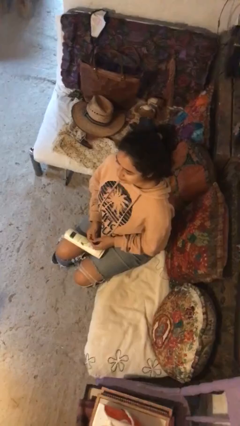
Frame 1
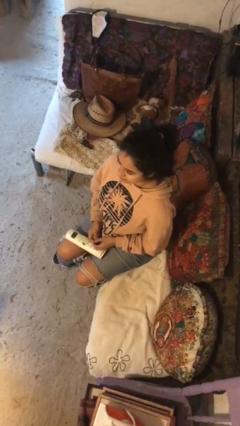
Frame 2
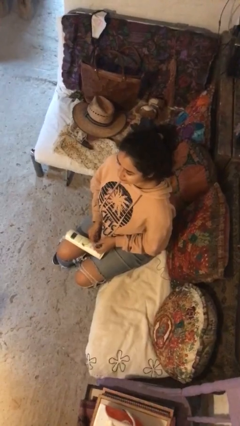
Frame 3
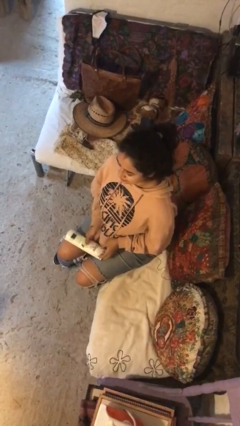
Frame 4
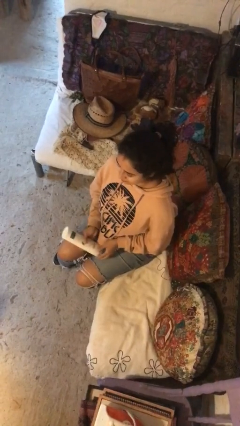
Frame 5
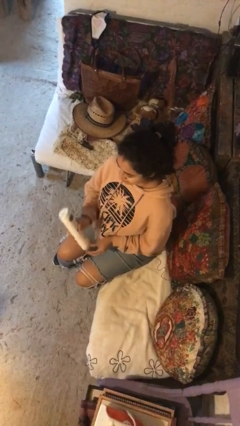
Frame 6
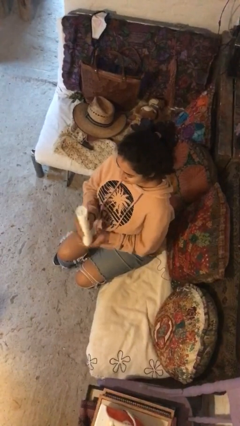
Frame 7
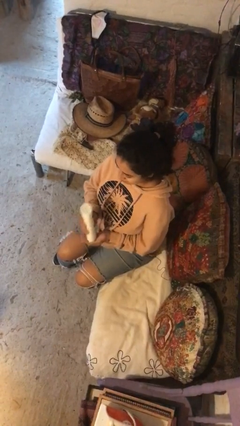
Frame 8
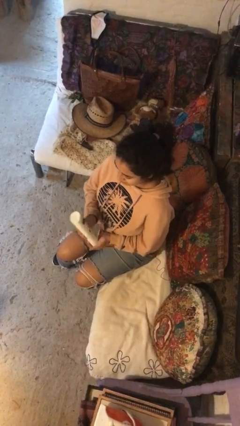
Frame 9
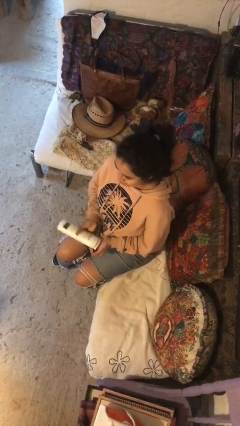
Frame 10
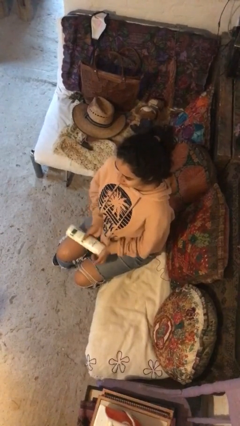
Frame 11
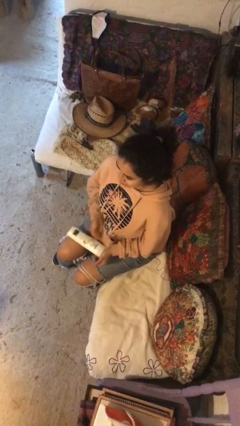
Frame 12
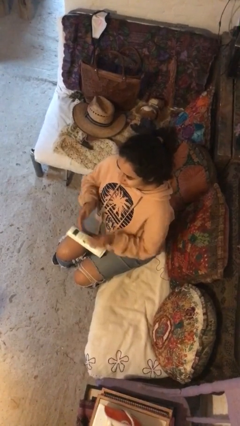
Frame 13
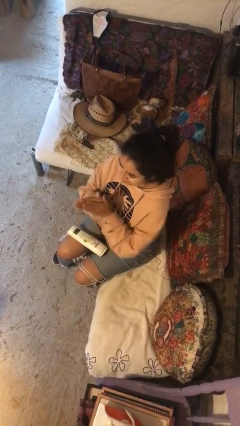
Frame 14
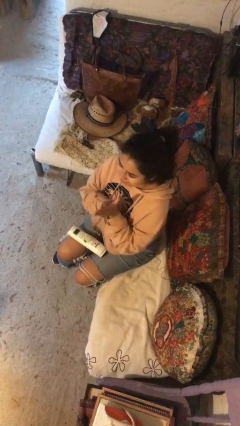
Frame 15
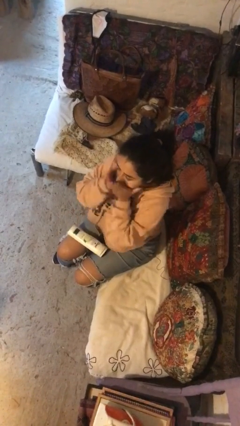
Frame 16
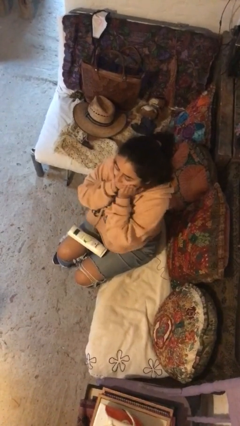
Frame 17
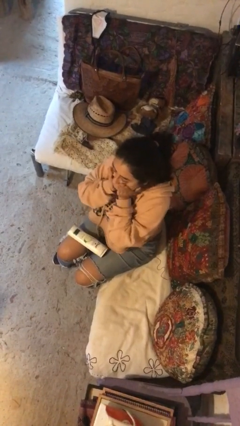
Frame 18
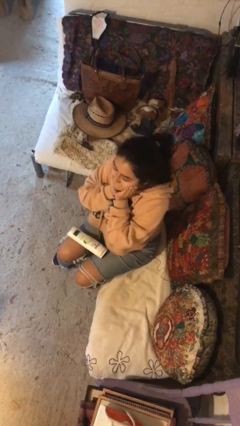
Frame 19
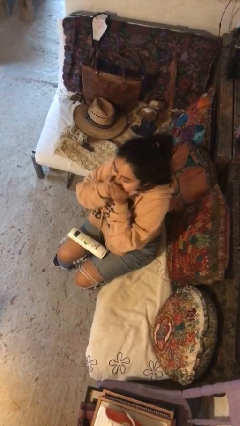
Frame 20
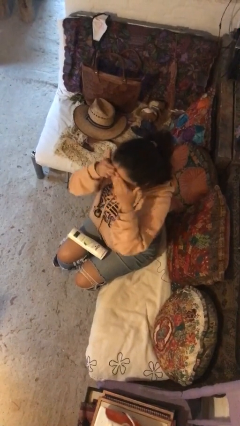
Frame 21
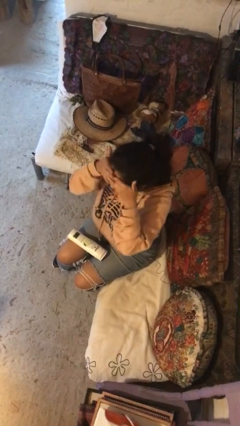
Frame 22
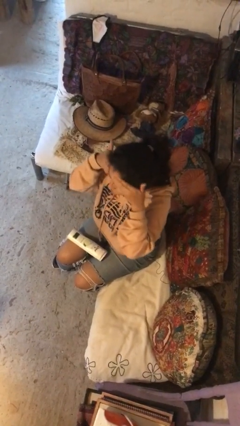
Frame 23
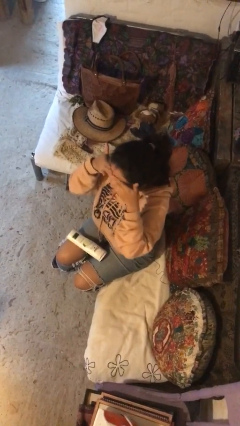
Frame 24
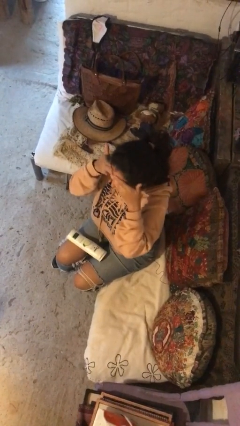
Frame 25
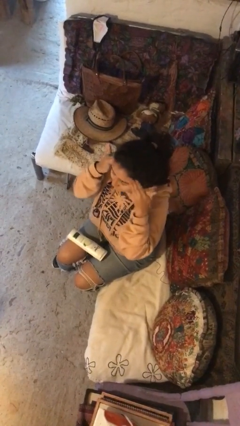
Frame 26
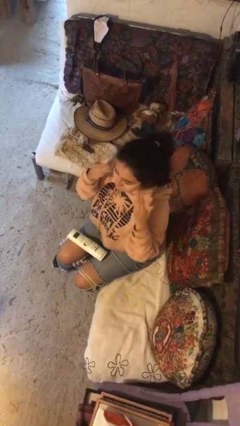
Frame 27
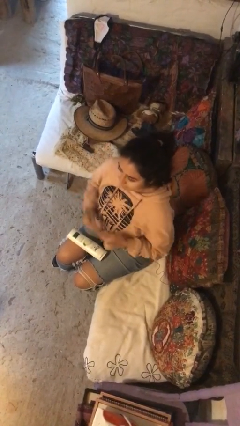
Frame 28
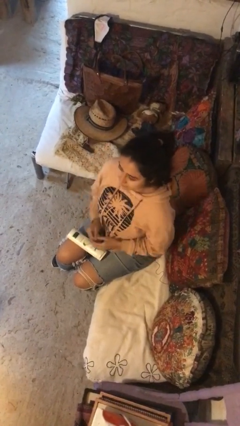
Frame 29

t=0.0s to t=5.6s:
person applies facial moisturizer

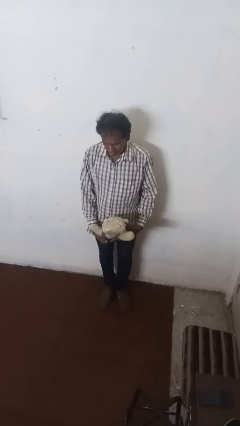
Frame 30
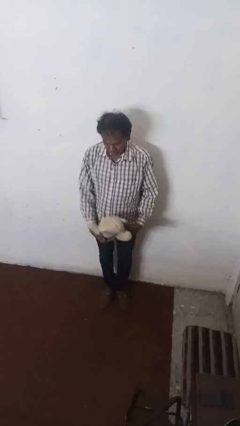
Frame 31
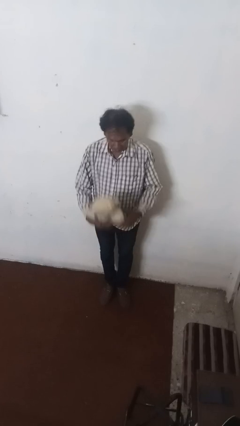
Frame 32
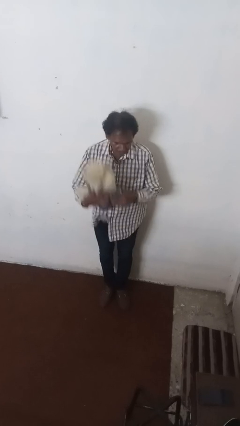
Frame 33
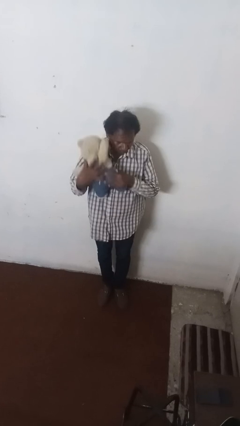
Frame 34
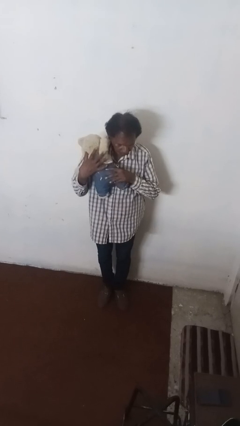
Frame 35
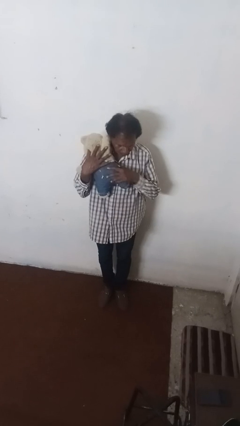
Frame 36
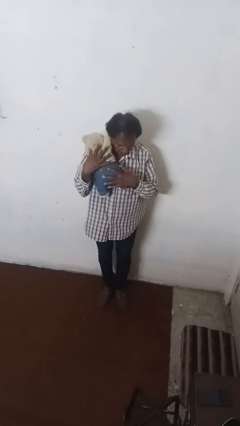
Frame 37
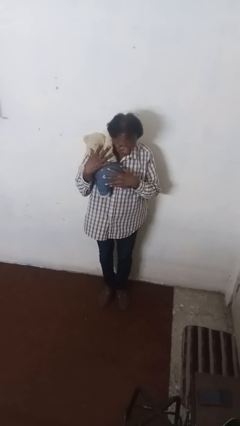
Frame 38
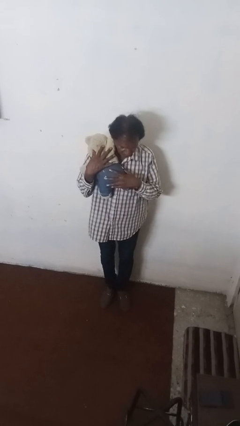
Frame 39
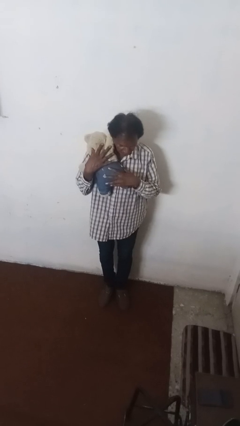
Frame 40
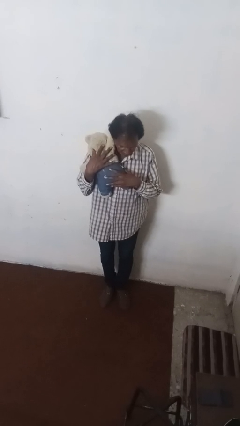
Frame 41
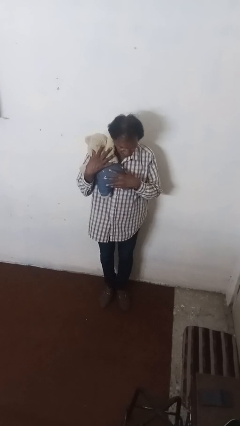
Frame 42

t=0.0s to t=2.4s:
person hugs stuffed animal

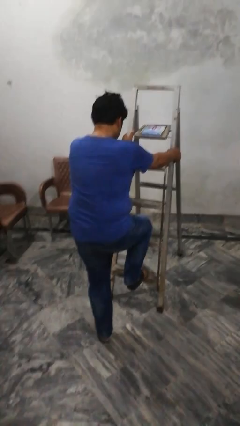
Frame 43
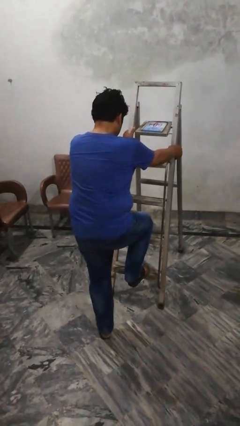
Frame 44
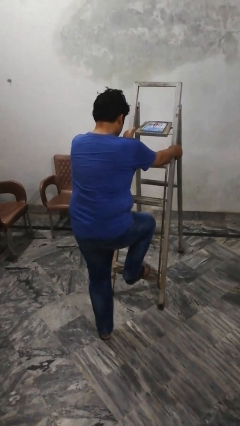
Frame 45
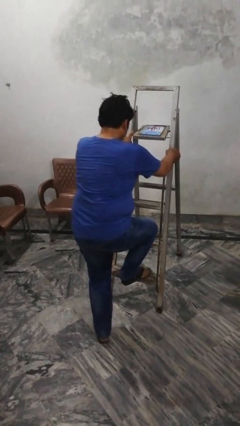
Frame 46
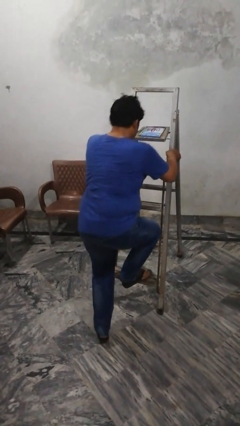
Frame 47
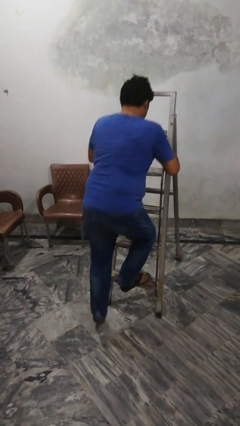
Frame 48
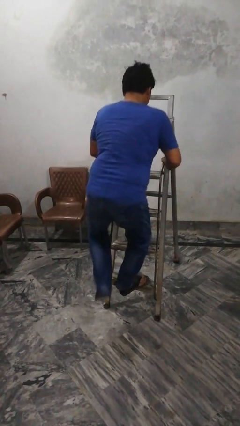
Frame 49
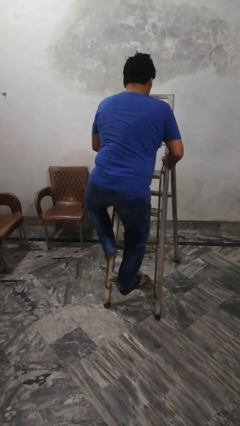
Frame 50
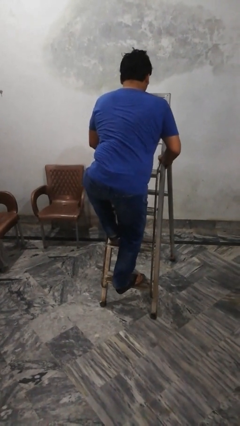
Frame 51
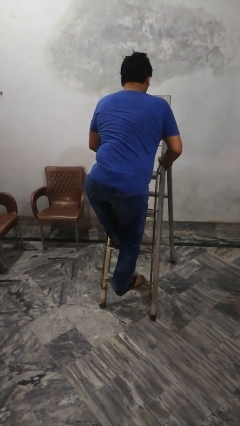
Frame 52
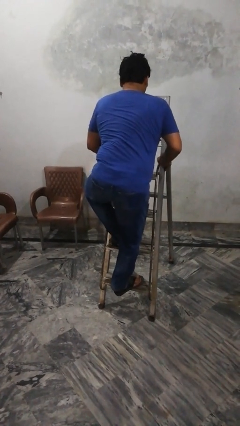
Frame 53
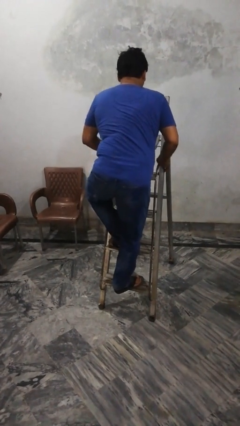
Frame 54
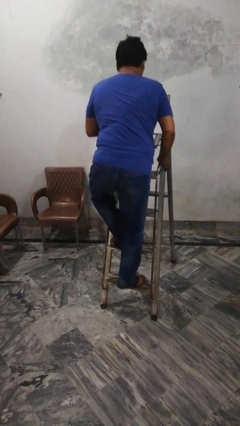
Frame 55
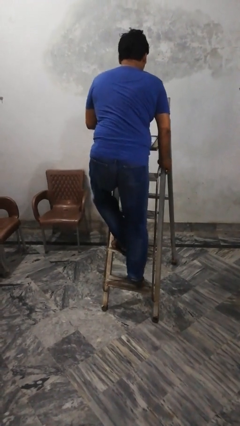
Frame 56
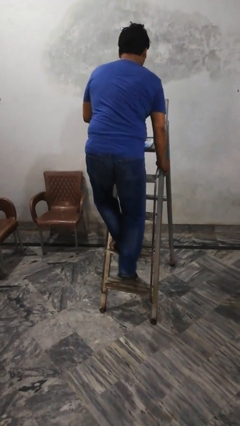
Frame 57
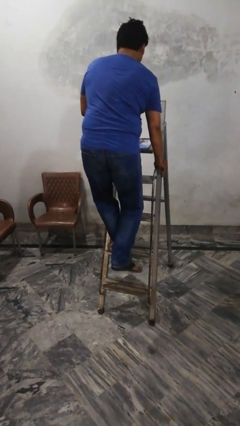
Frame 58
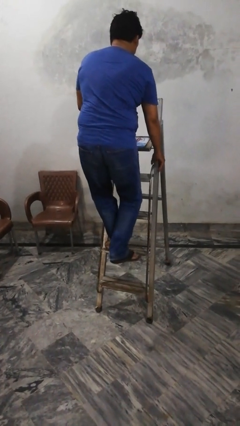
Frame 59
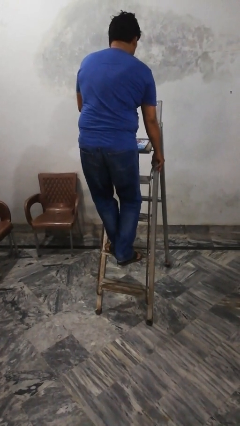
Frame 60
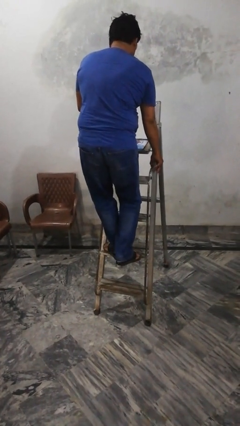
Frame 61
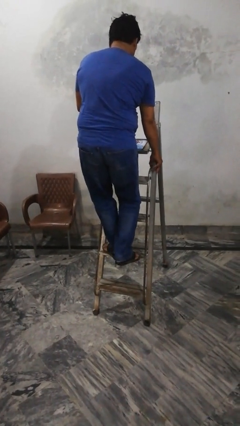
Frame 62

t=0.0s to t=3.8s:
person climbs up ladder

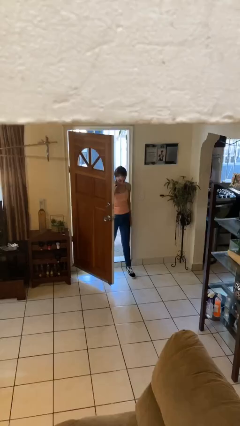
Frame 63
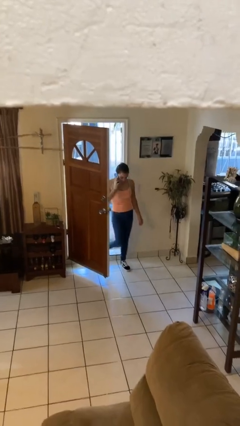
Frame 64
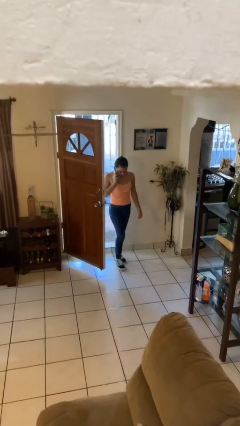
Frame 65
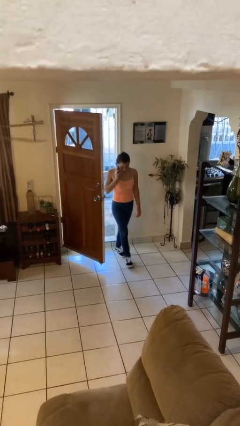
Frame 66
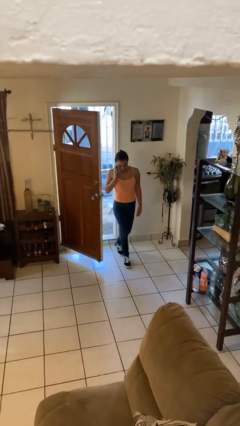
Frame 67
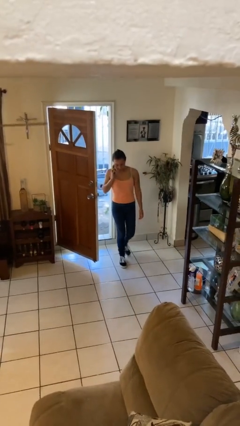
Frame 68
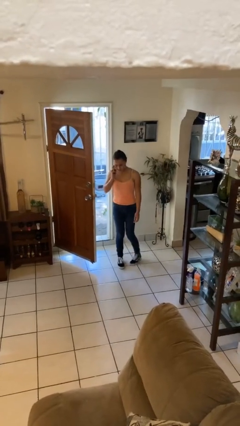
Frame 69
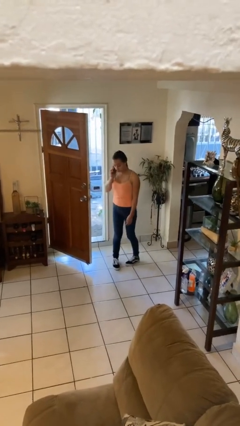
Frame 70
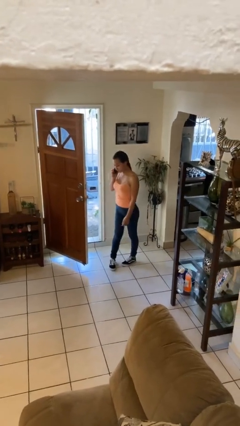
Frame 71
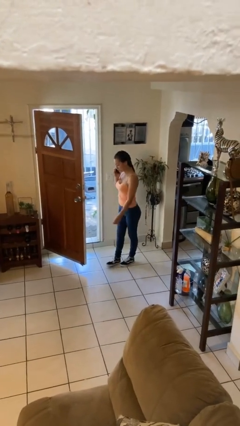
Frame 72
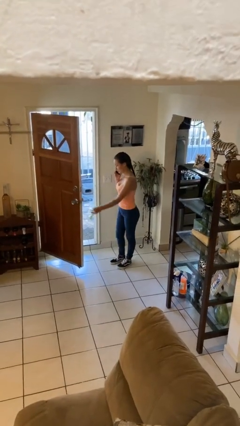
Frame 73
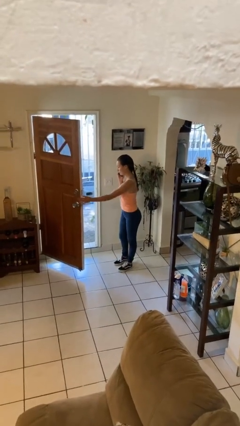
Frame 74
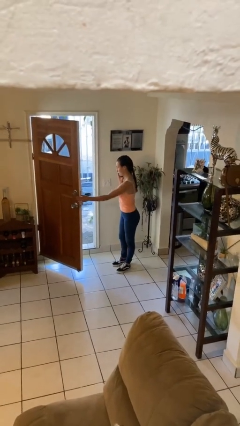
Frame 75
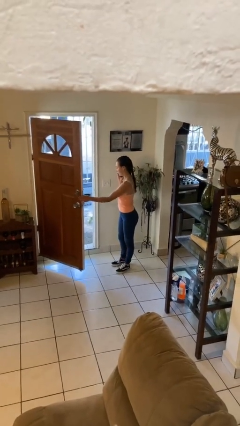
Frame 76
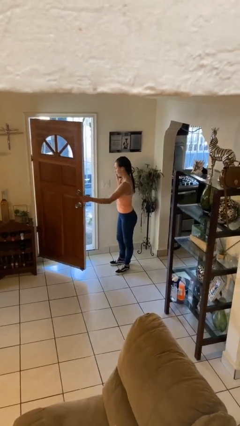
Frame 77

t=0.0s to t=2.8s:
person enters scene through structure

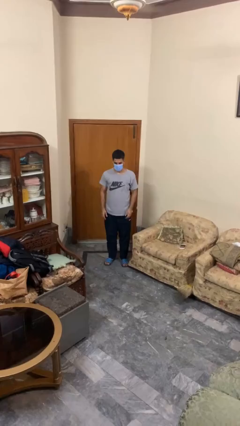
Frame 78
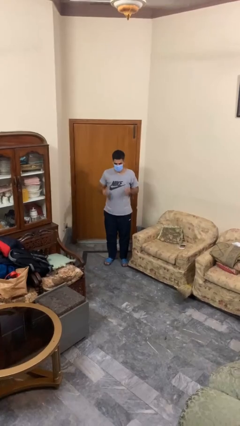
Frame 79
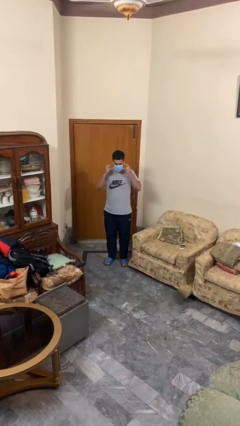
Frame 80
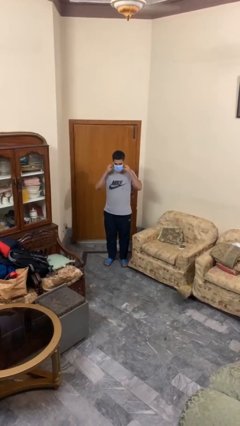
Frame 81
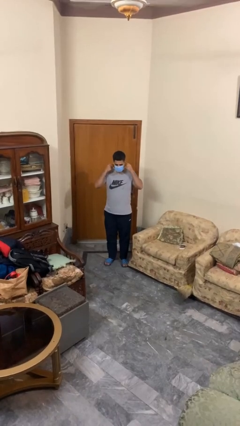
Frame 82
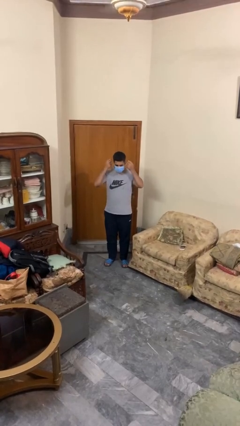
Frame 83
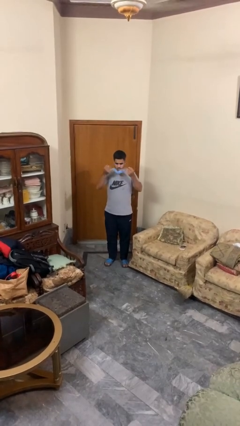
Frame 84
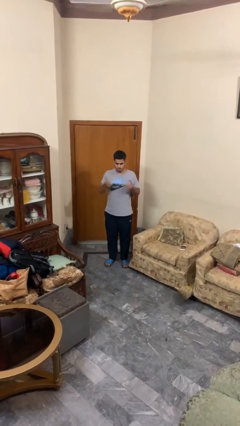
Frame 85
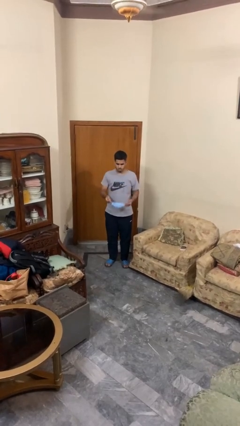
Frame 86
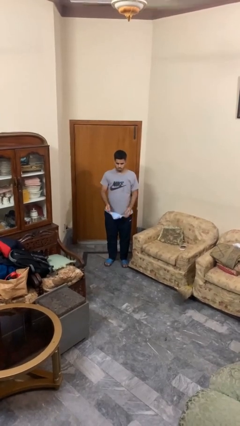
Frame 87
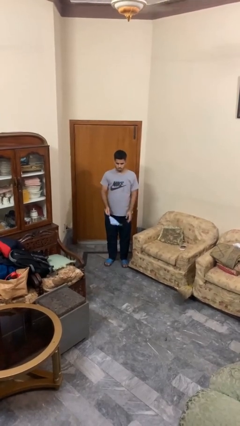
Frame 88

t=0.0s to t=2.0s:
person takes off facemask

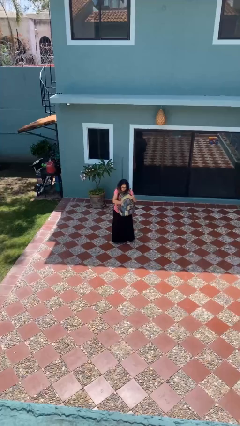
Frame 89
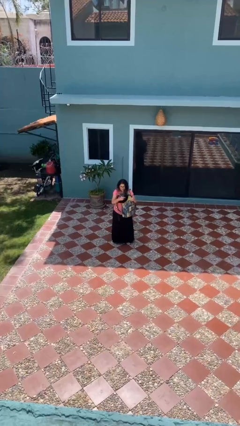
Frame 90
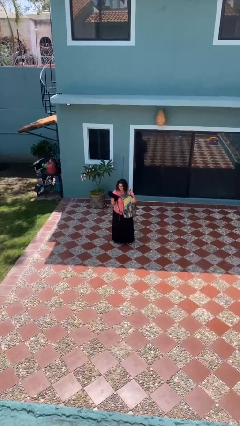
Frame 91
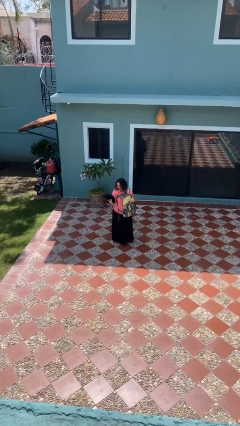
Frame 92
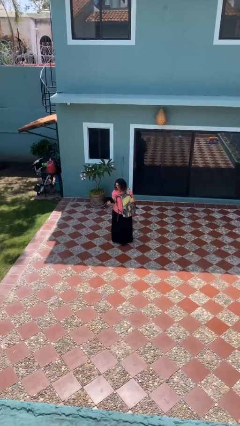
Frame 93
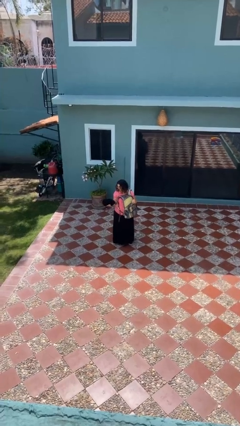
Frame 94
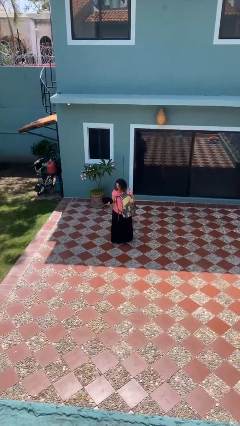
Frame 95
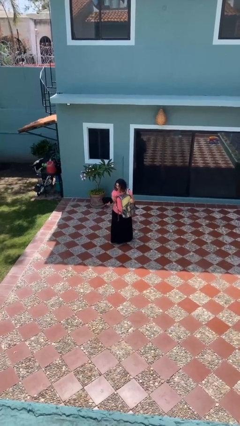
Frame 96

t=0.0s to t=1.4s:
person takes object from backpack
